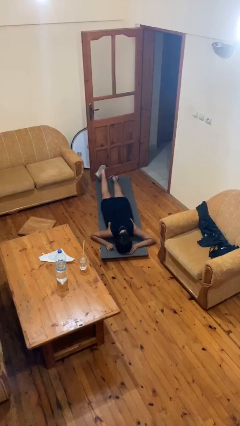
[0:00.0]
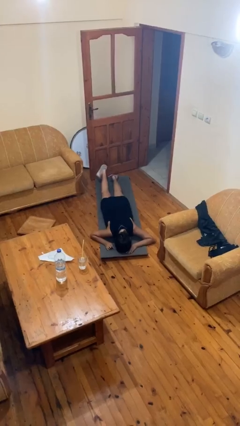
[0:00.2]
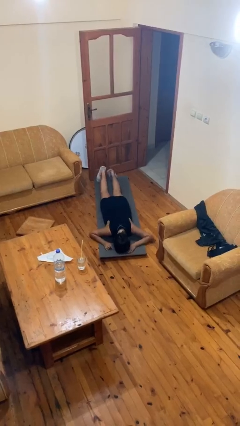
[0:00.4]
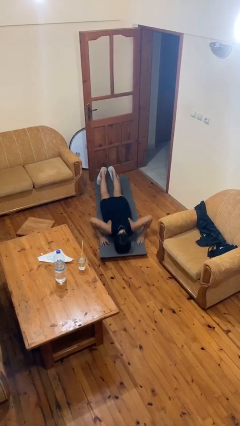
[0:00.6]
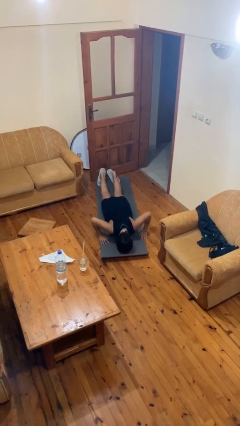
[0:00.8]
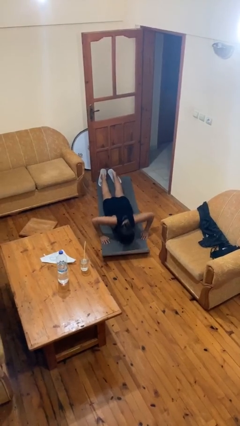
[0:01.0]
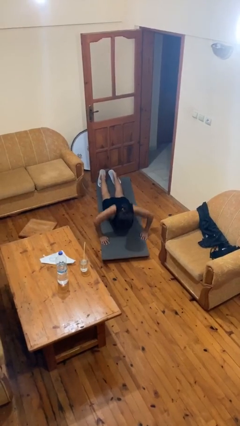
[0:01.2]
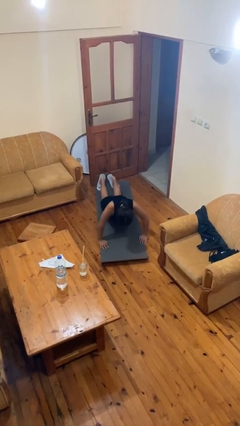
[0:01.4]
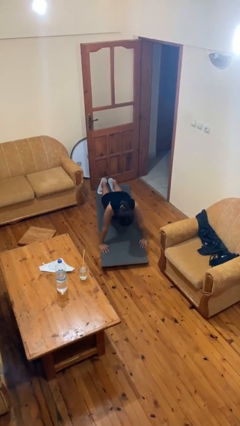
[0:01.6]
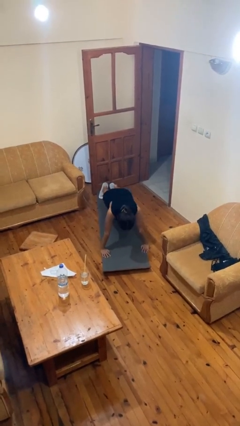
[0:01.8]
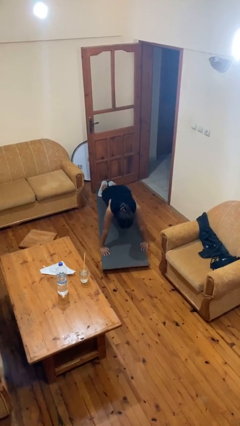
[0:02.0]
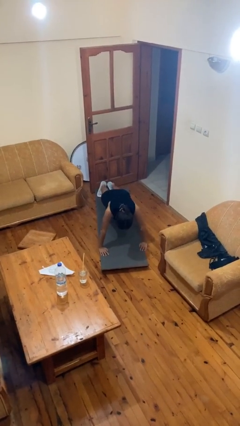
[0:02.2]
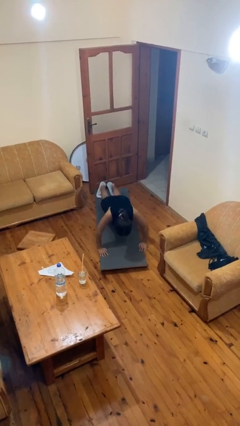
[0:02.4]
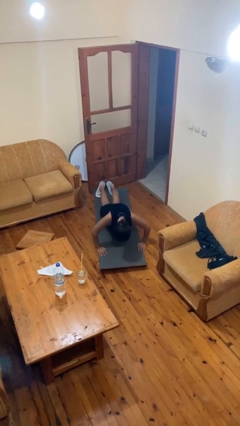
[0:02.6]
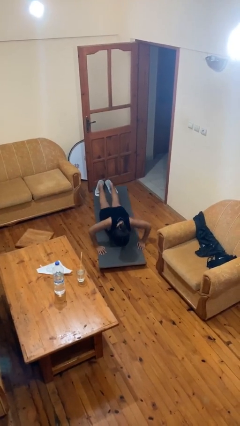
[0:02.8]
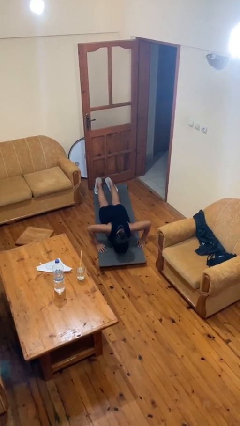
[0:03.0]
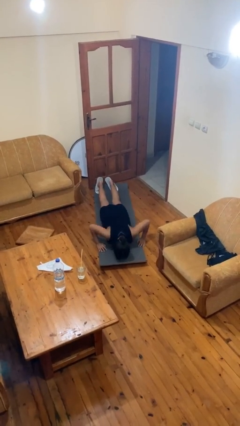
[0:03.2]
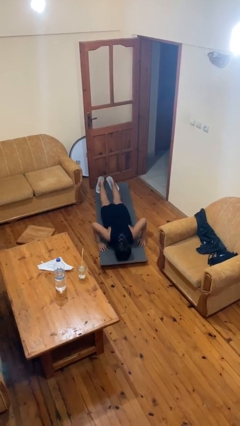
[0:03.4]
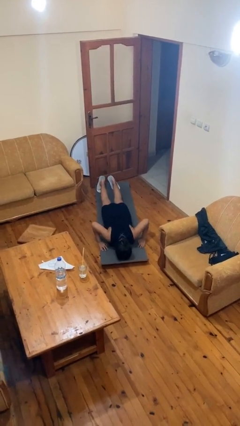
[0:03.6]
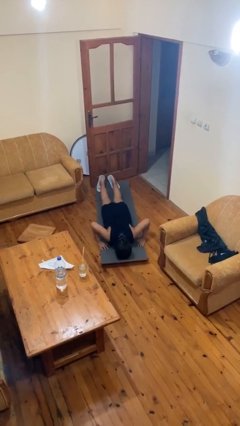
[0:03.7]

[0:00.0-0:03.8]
person exercises with pushup

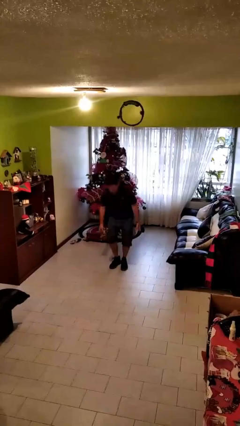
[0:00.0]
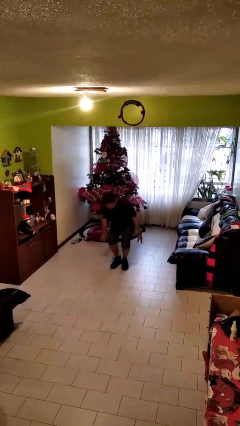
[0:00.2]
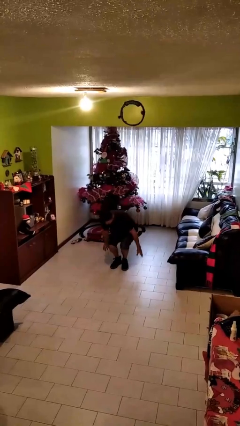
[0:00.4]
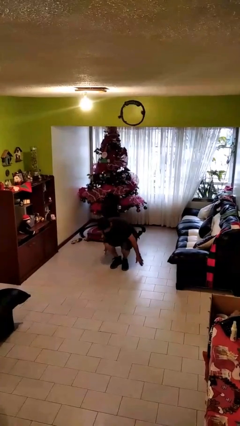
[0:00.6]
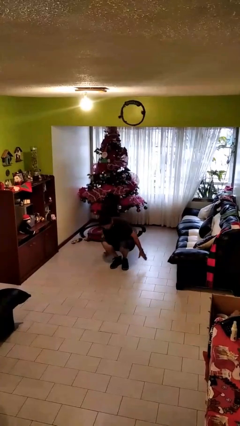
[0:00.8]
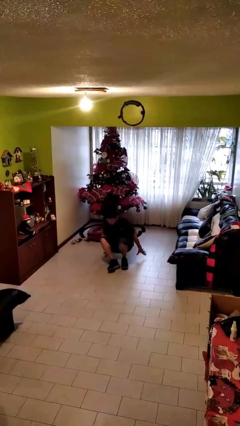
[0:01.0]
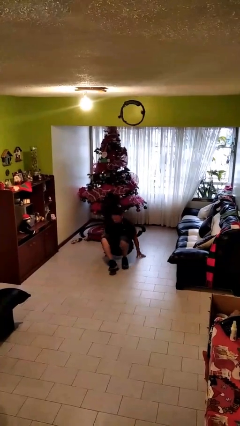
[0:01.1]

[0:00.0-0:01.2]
person sits down

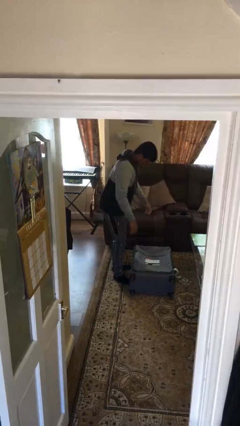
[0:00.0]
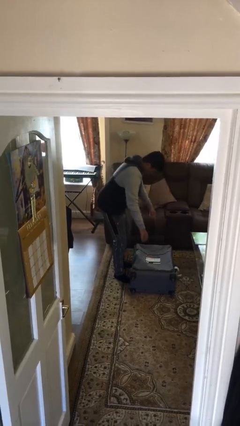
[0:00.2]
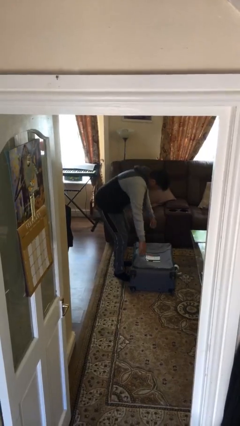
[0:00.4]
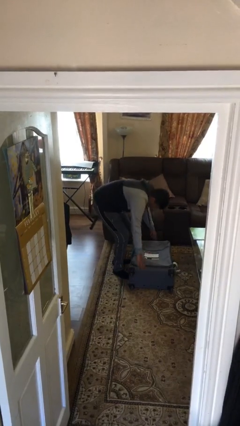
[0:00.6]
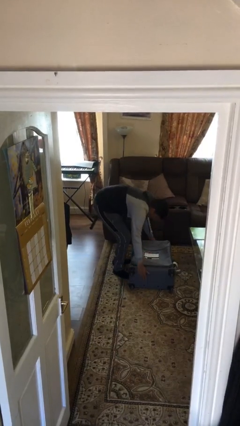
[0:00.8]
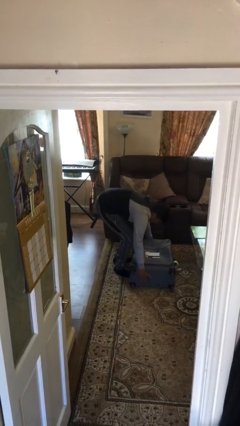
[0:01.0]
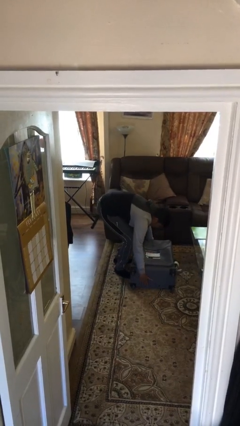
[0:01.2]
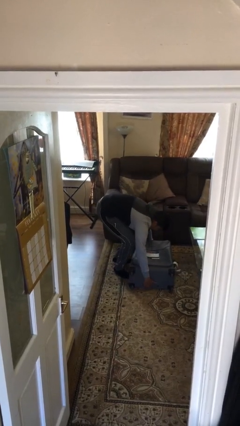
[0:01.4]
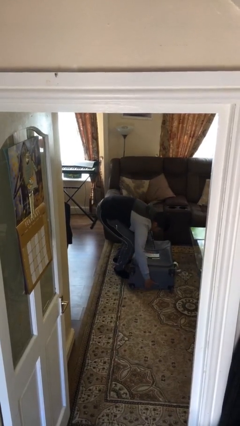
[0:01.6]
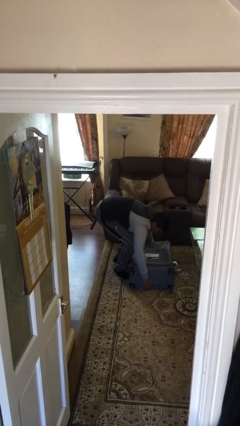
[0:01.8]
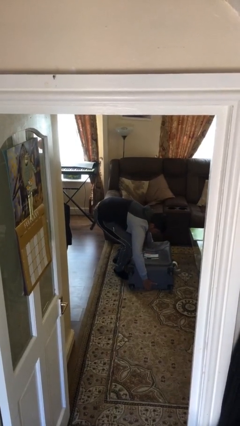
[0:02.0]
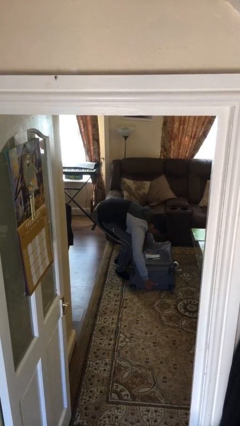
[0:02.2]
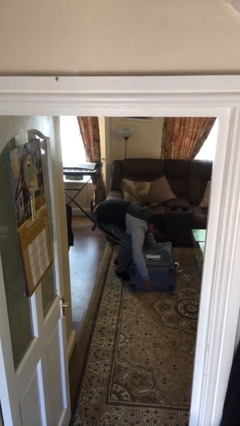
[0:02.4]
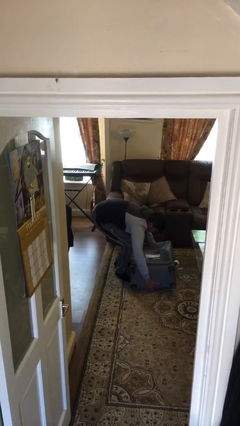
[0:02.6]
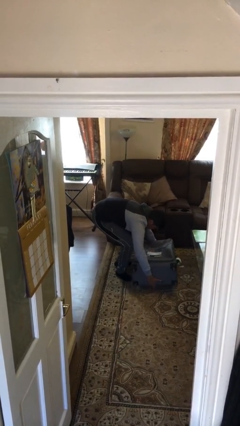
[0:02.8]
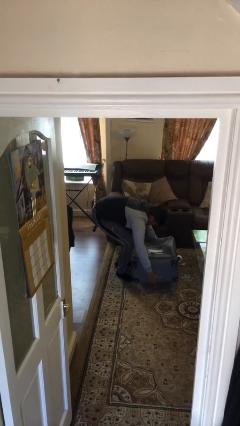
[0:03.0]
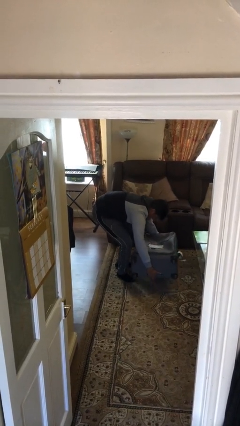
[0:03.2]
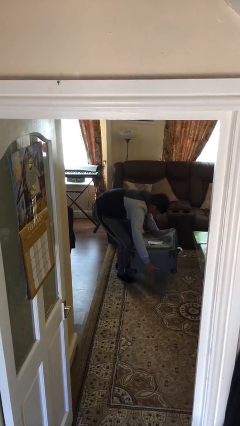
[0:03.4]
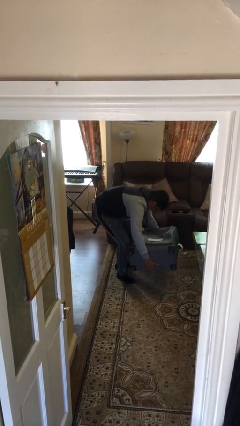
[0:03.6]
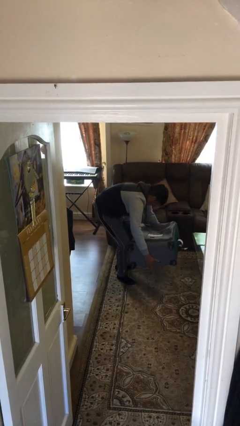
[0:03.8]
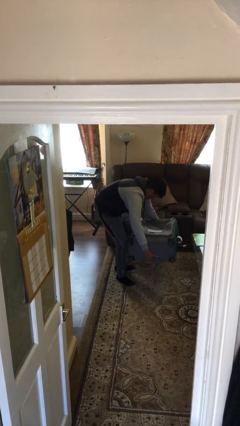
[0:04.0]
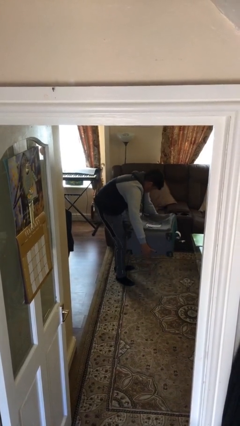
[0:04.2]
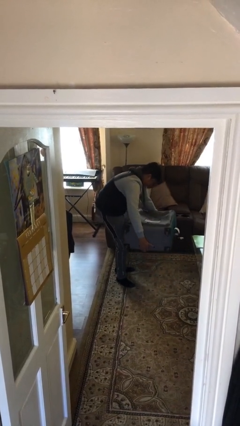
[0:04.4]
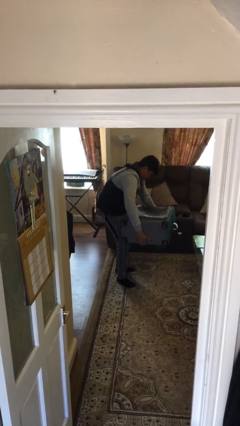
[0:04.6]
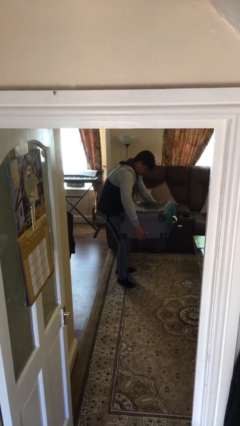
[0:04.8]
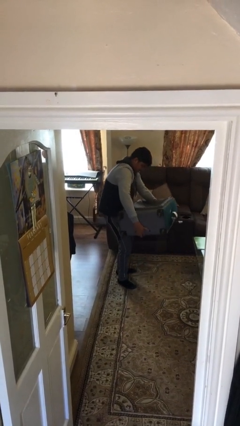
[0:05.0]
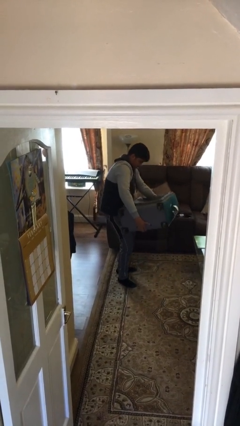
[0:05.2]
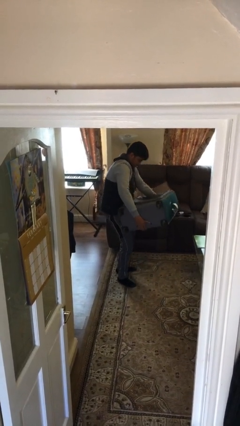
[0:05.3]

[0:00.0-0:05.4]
person picks up object from floor

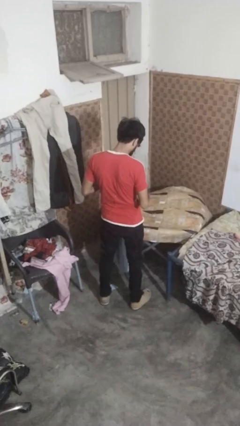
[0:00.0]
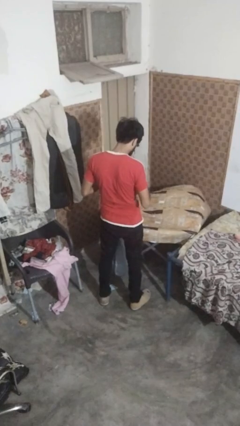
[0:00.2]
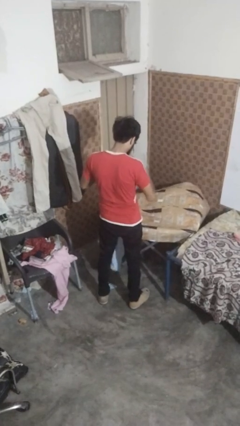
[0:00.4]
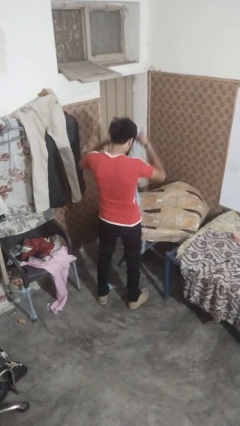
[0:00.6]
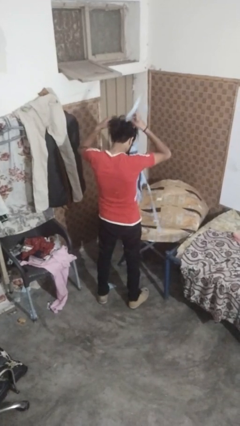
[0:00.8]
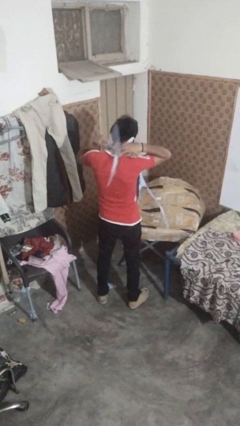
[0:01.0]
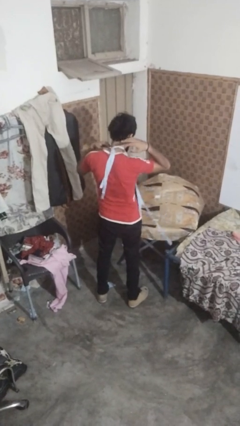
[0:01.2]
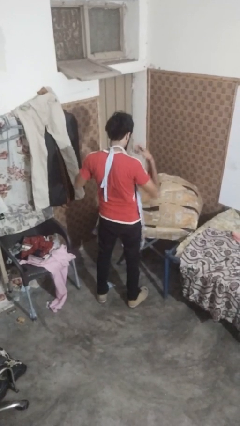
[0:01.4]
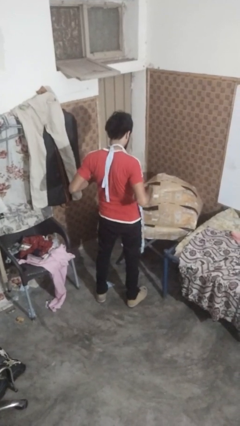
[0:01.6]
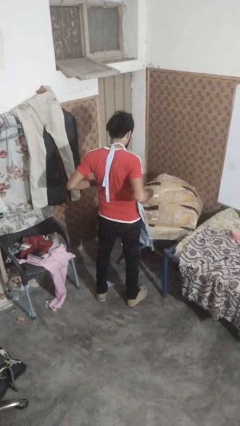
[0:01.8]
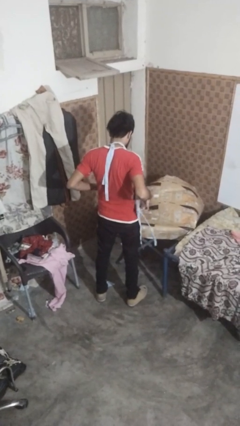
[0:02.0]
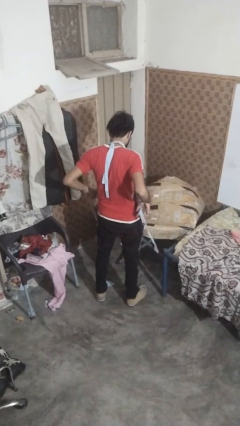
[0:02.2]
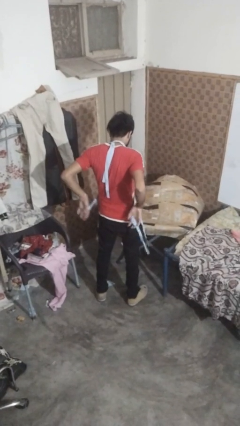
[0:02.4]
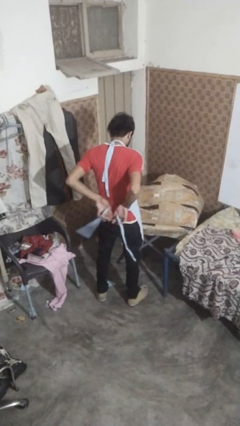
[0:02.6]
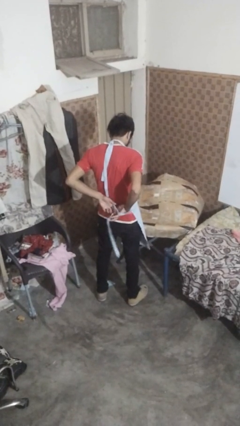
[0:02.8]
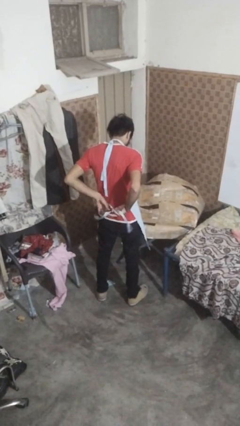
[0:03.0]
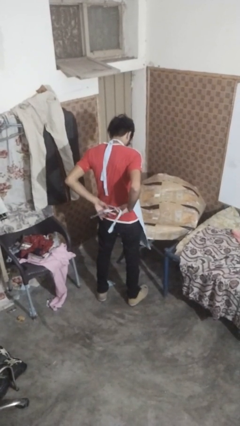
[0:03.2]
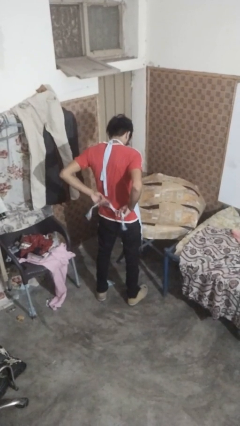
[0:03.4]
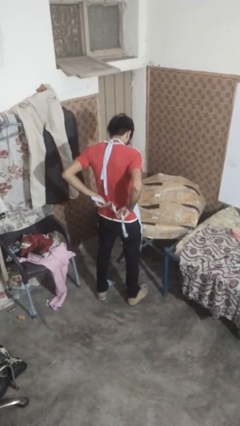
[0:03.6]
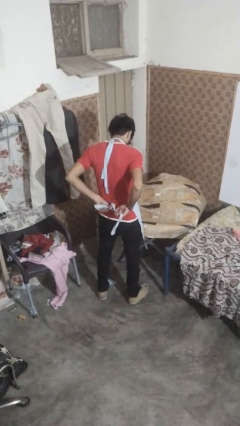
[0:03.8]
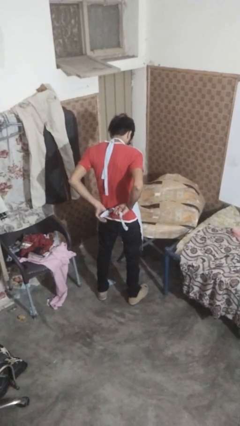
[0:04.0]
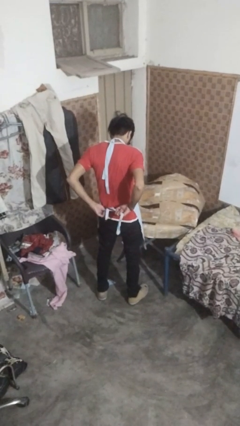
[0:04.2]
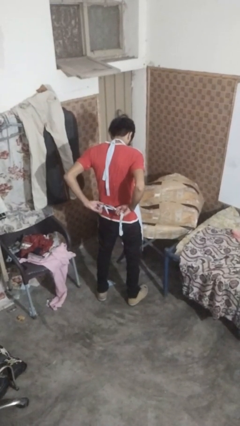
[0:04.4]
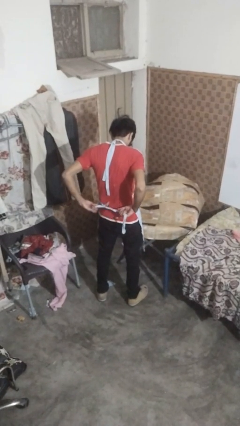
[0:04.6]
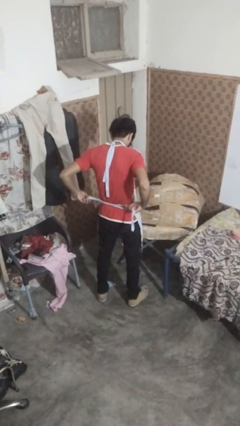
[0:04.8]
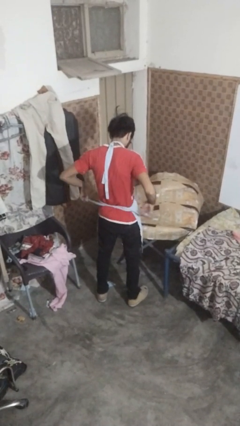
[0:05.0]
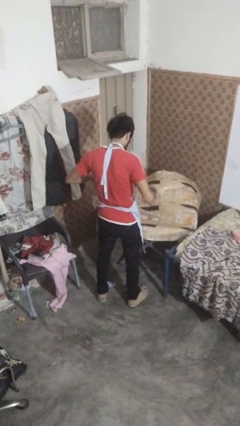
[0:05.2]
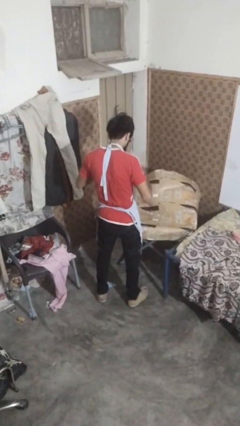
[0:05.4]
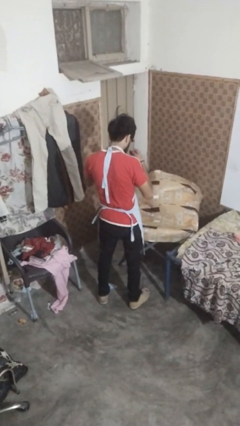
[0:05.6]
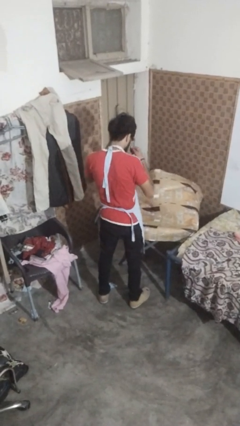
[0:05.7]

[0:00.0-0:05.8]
person puts on apron

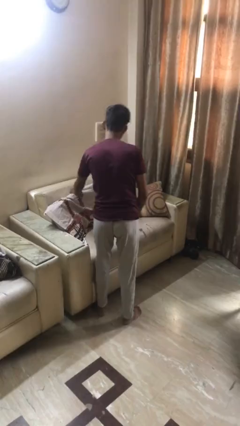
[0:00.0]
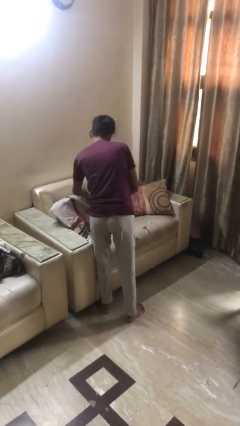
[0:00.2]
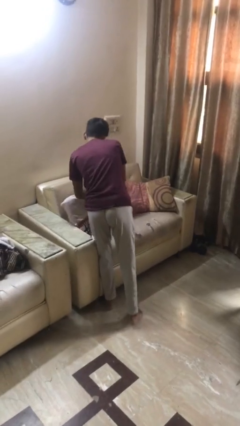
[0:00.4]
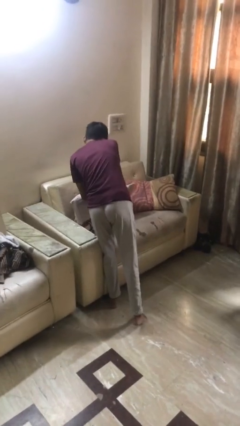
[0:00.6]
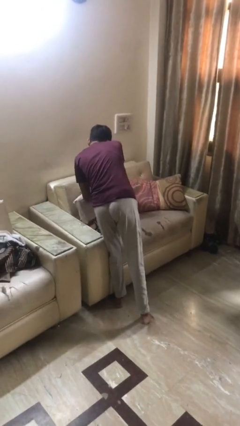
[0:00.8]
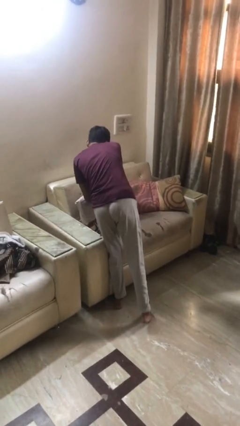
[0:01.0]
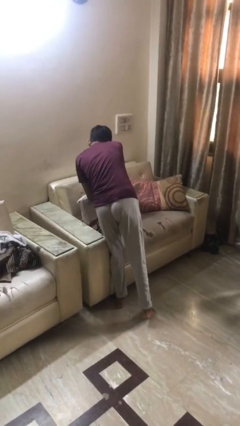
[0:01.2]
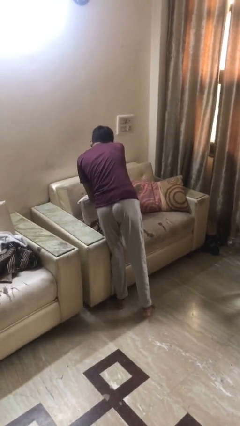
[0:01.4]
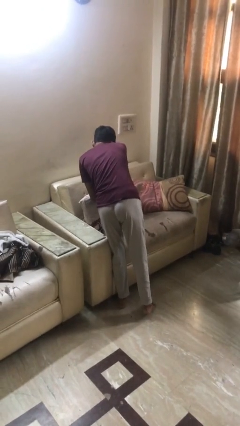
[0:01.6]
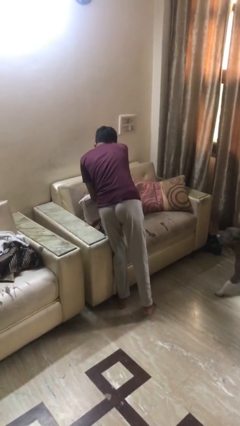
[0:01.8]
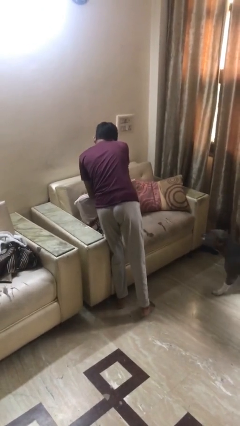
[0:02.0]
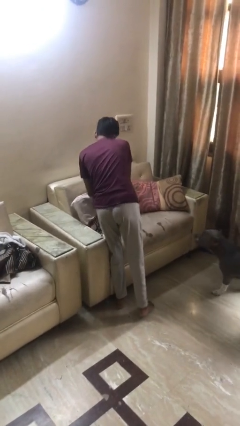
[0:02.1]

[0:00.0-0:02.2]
person searches in couch
